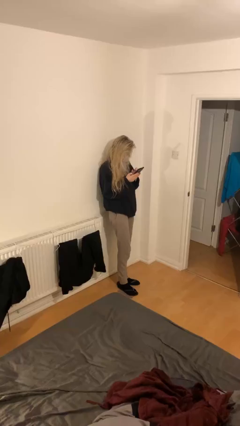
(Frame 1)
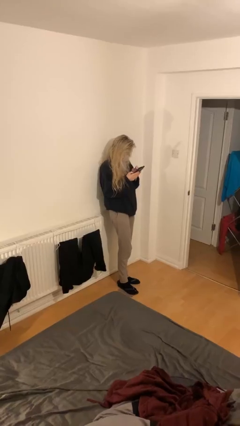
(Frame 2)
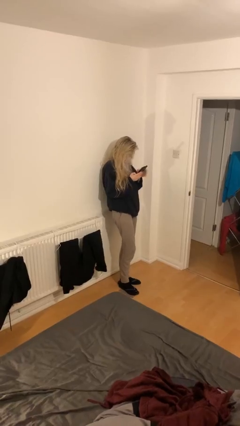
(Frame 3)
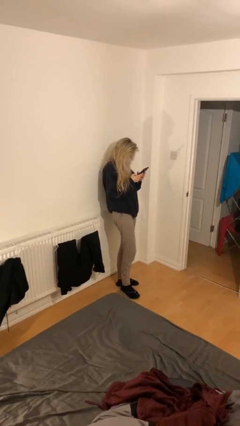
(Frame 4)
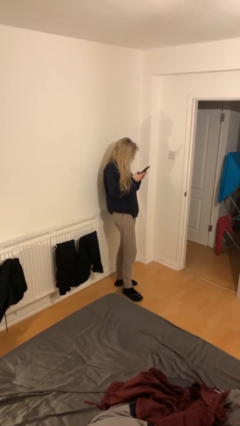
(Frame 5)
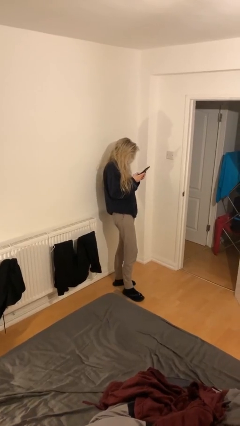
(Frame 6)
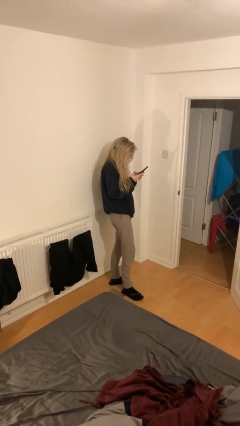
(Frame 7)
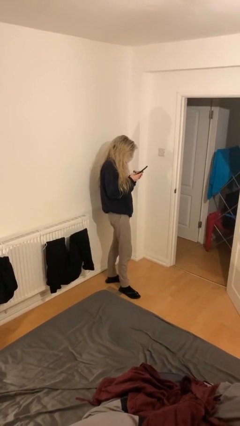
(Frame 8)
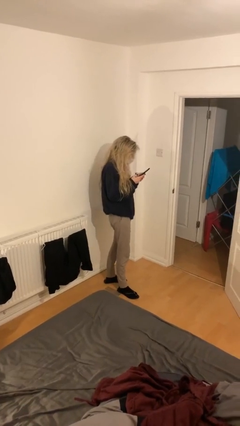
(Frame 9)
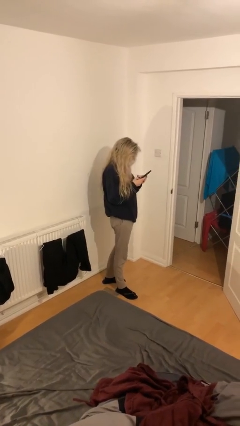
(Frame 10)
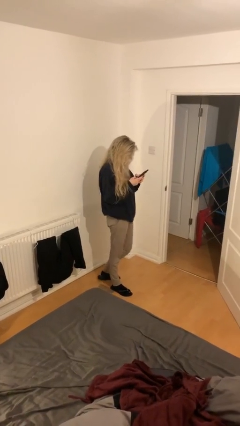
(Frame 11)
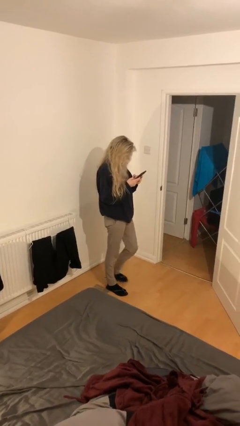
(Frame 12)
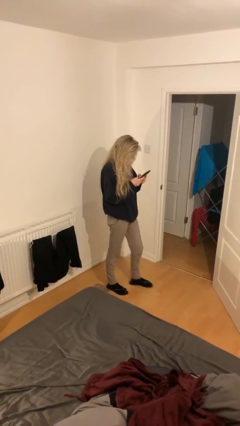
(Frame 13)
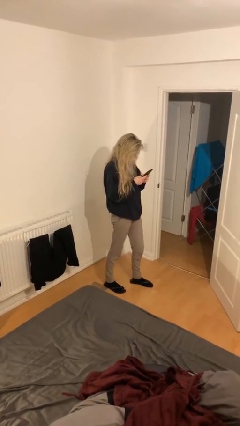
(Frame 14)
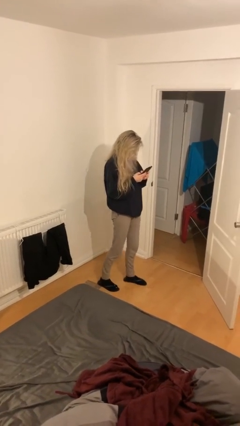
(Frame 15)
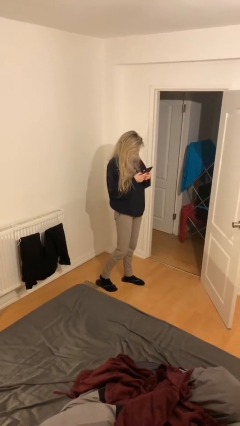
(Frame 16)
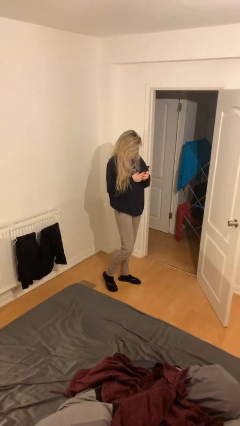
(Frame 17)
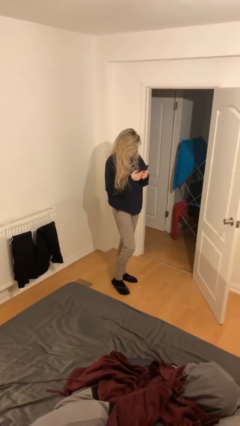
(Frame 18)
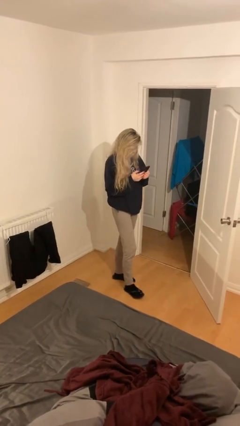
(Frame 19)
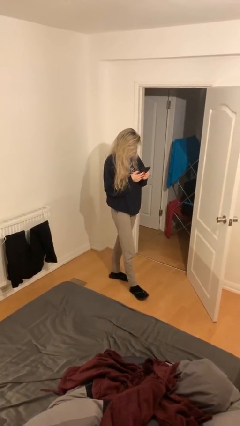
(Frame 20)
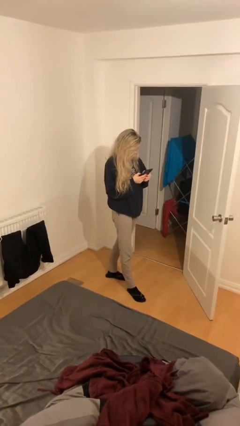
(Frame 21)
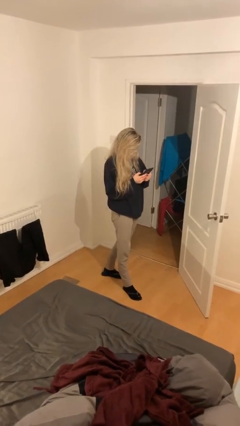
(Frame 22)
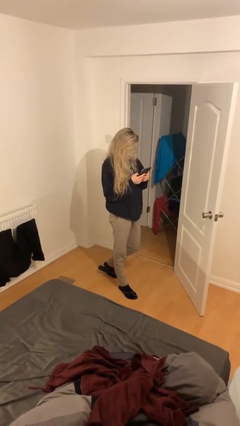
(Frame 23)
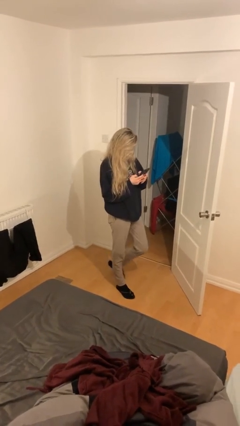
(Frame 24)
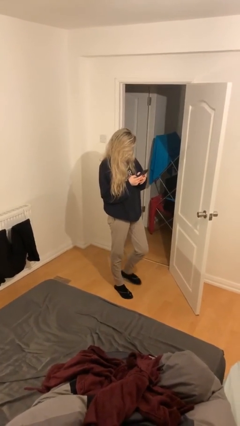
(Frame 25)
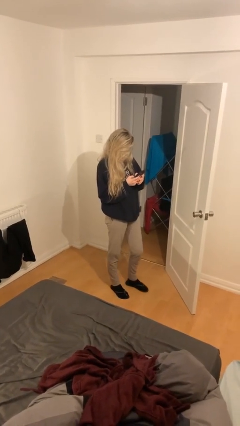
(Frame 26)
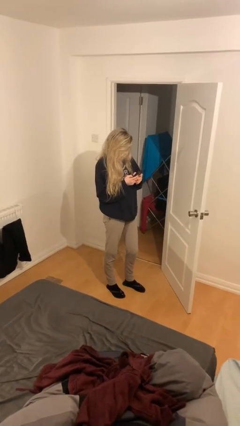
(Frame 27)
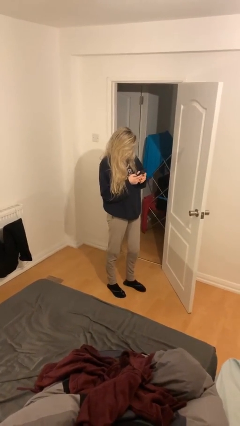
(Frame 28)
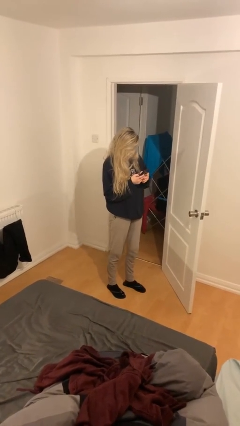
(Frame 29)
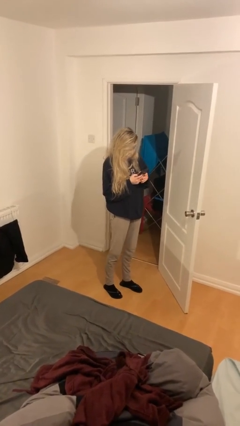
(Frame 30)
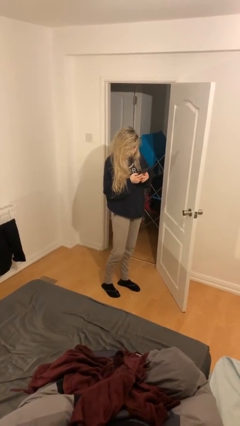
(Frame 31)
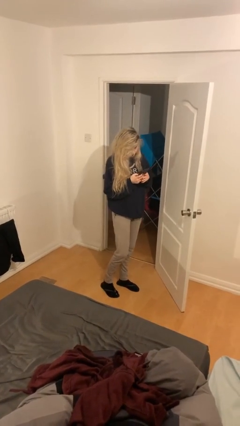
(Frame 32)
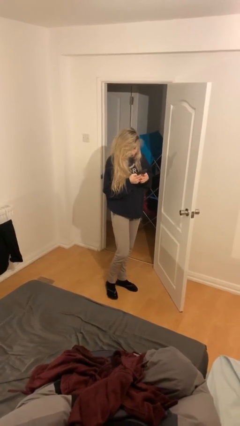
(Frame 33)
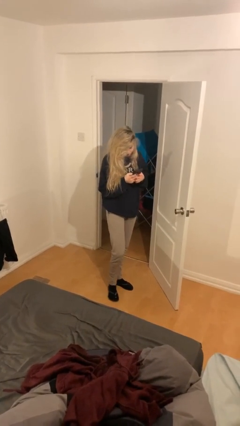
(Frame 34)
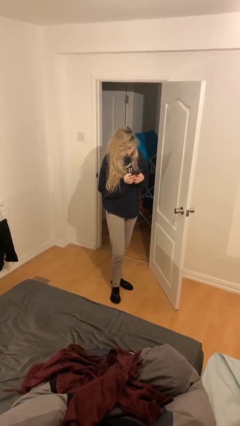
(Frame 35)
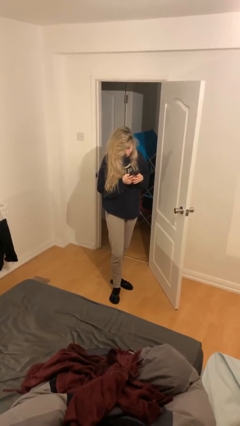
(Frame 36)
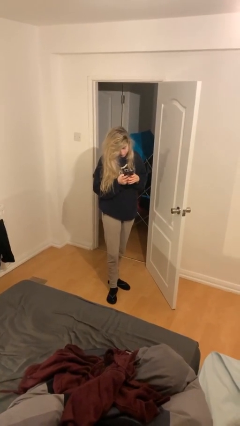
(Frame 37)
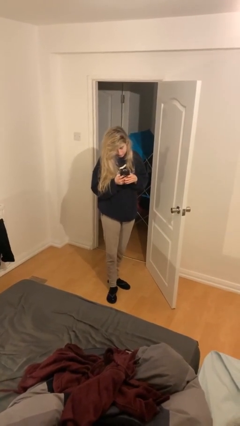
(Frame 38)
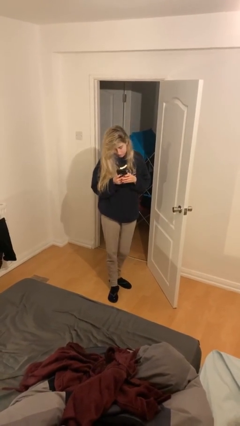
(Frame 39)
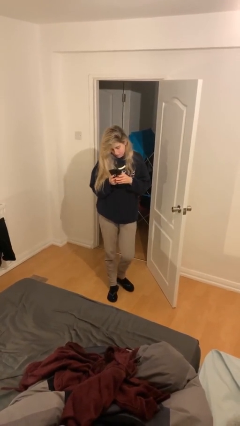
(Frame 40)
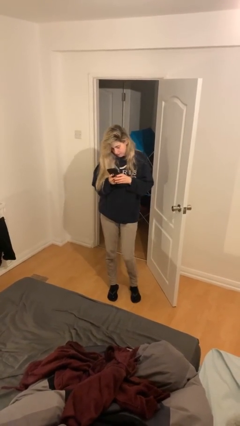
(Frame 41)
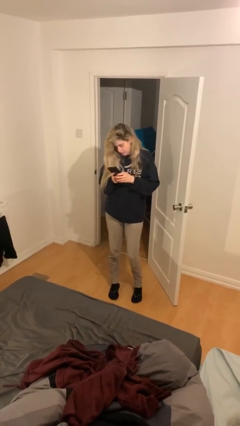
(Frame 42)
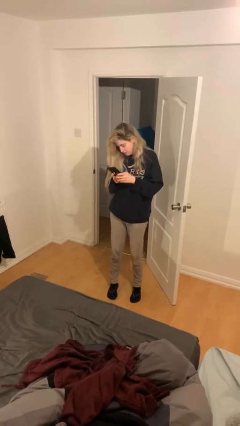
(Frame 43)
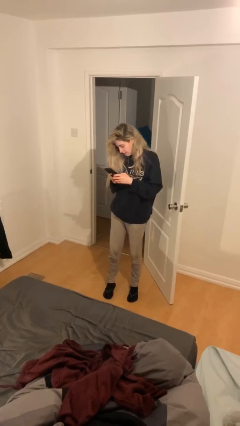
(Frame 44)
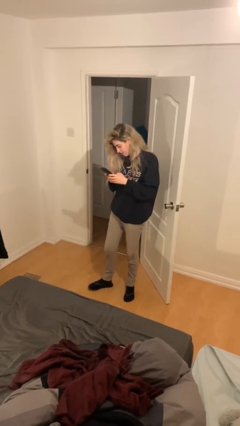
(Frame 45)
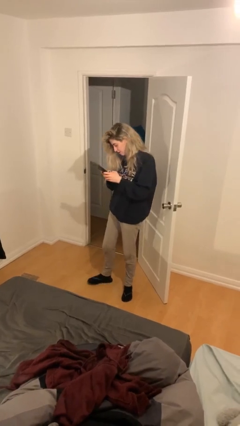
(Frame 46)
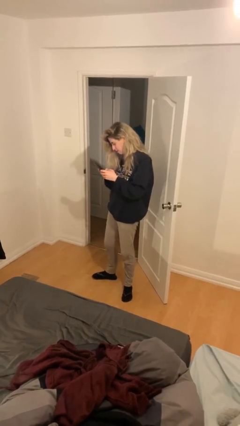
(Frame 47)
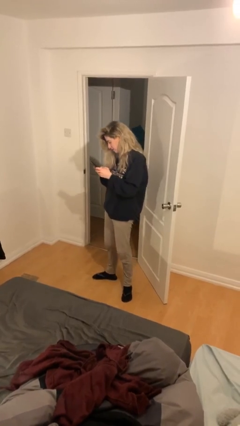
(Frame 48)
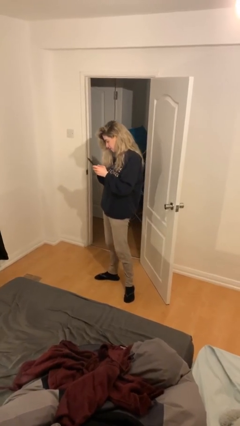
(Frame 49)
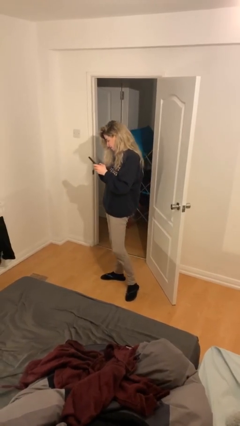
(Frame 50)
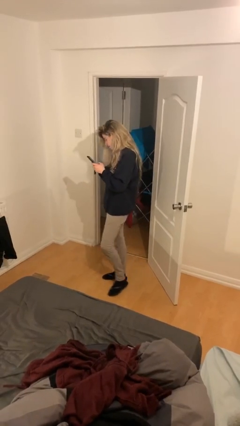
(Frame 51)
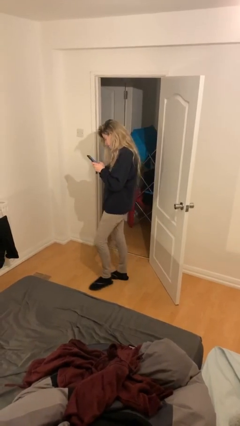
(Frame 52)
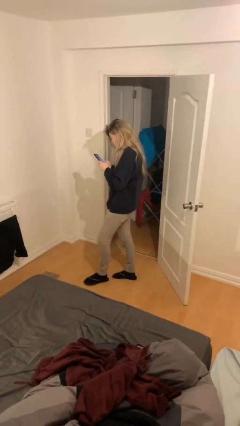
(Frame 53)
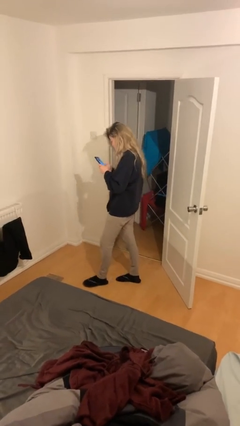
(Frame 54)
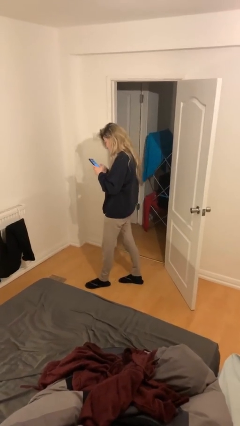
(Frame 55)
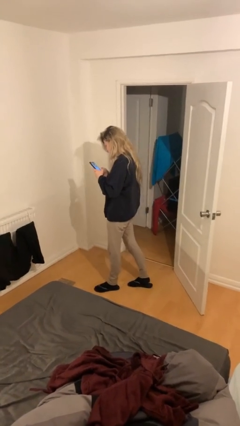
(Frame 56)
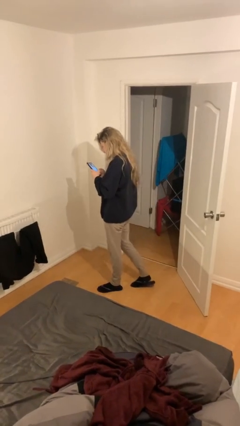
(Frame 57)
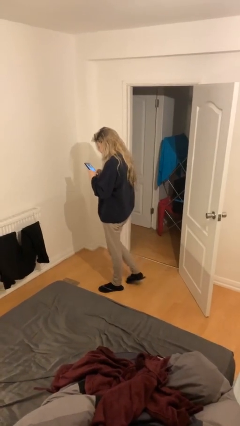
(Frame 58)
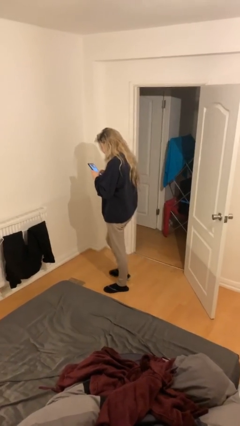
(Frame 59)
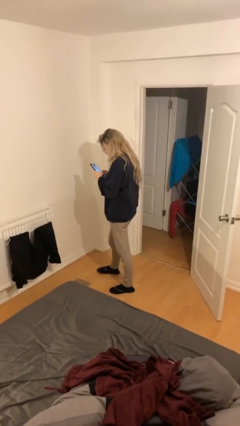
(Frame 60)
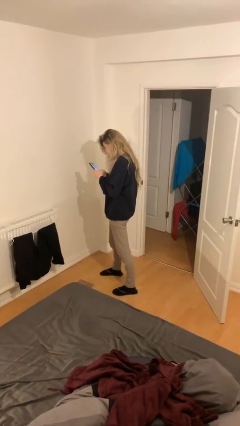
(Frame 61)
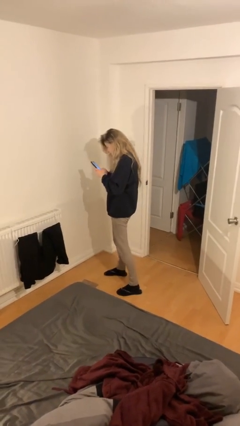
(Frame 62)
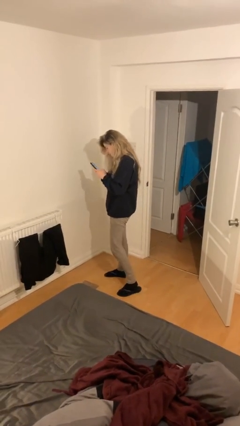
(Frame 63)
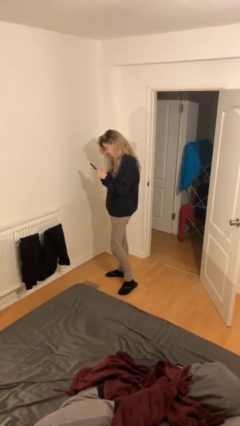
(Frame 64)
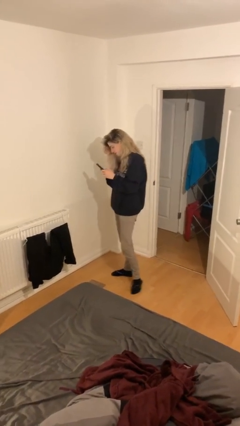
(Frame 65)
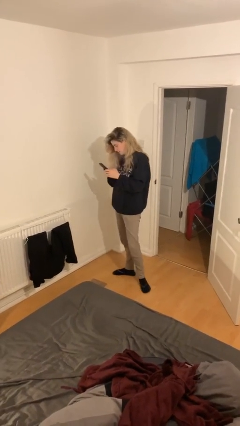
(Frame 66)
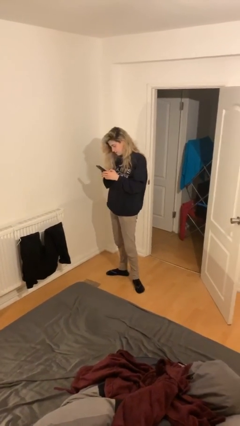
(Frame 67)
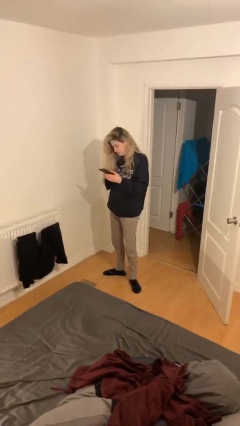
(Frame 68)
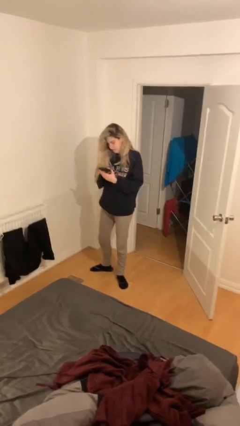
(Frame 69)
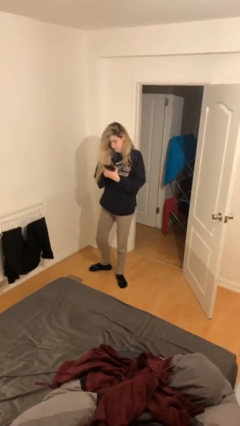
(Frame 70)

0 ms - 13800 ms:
person texts on phone

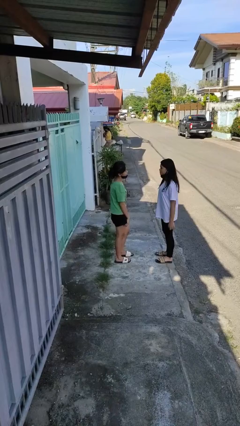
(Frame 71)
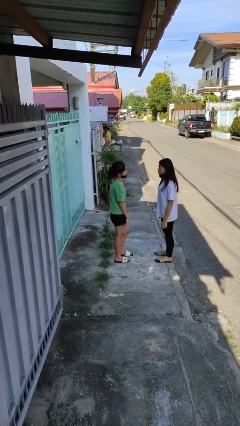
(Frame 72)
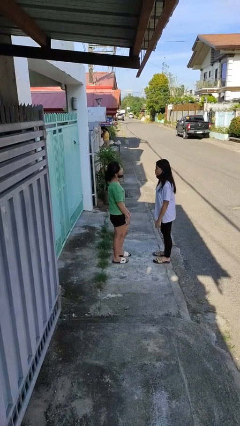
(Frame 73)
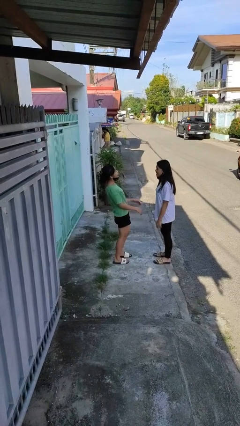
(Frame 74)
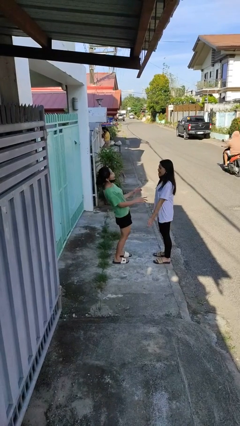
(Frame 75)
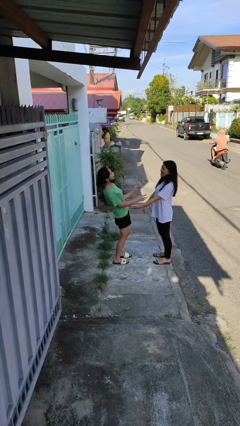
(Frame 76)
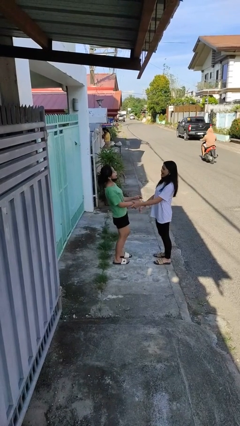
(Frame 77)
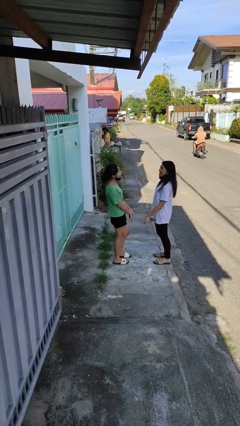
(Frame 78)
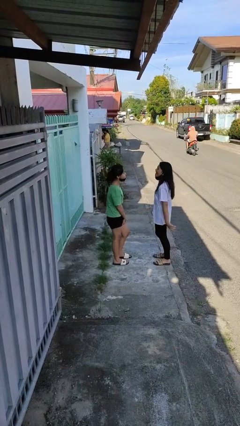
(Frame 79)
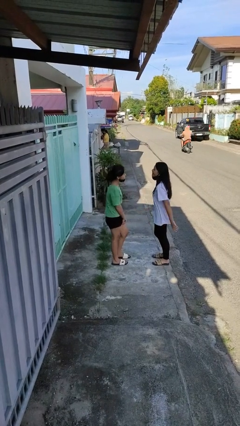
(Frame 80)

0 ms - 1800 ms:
person laughs with person

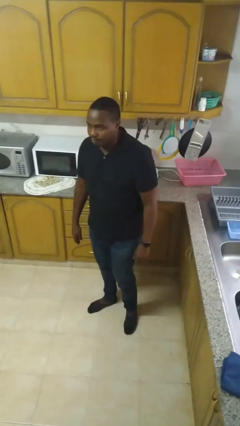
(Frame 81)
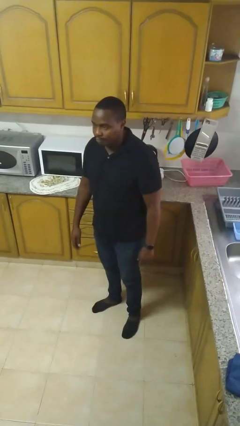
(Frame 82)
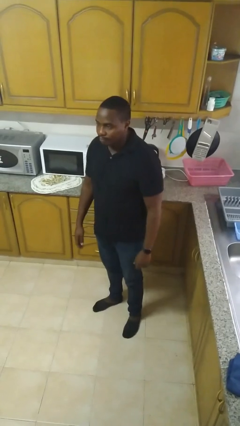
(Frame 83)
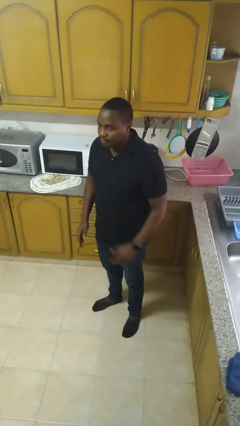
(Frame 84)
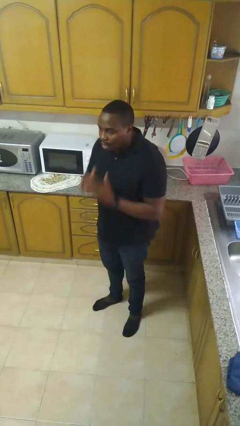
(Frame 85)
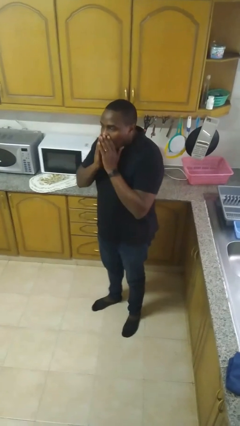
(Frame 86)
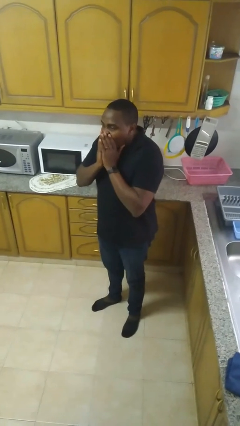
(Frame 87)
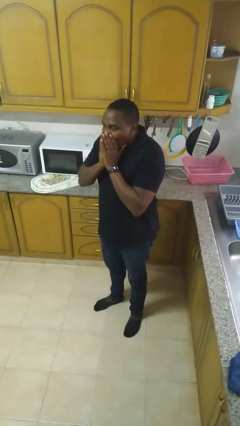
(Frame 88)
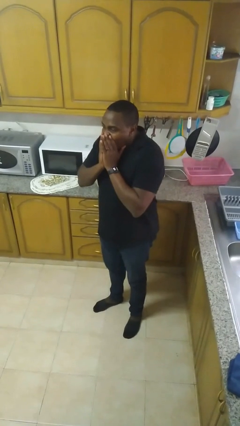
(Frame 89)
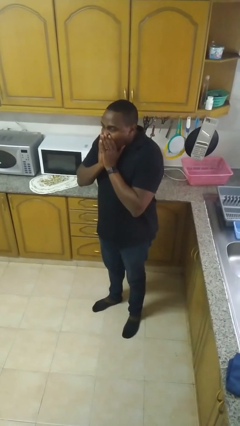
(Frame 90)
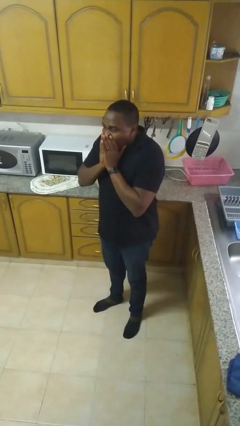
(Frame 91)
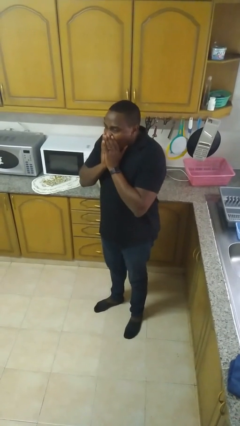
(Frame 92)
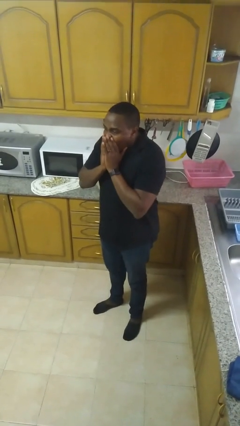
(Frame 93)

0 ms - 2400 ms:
person yawns
